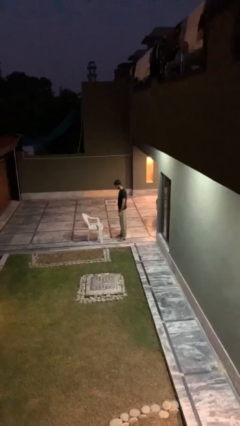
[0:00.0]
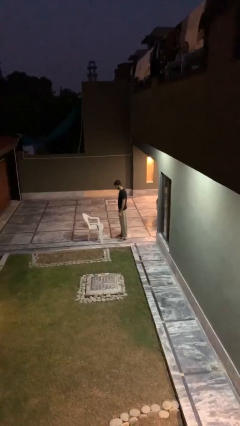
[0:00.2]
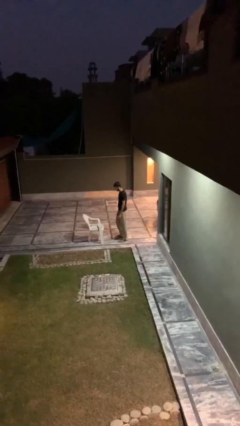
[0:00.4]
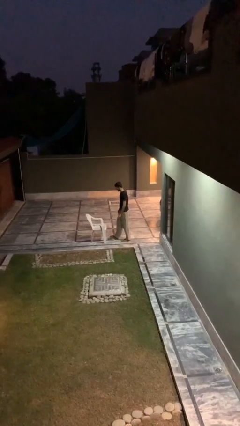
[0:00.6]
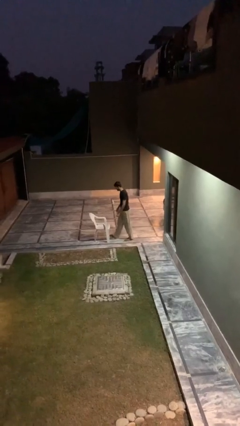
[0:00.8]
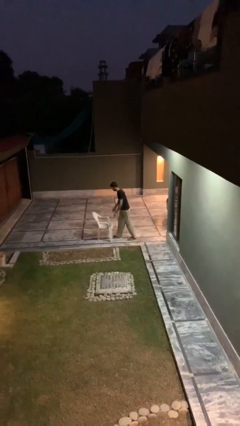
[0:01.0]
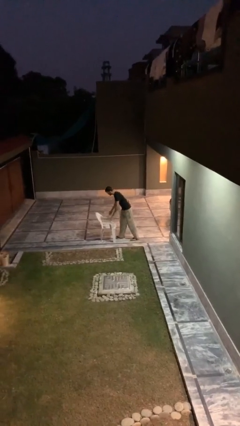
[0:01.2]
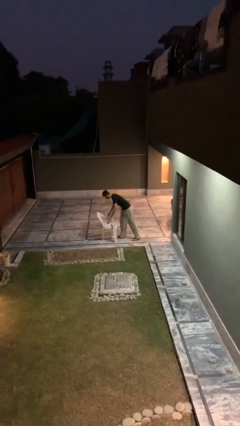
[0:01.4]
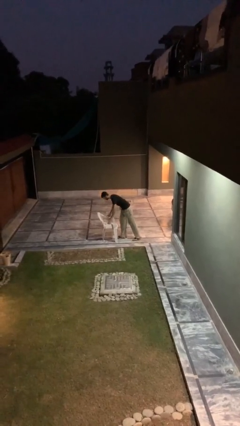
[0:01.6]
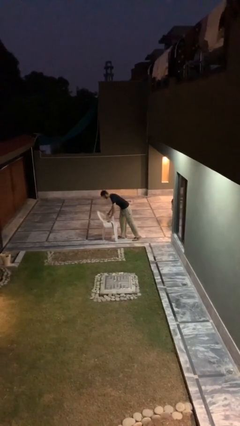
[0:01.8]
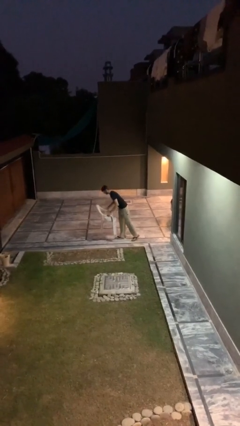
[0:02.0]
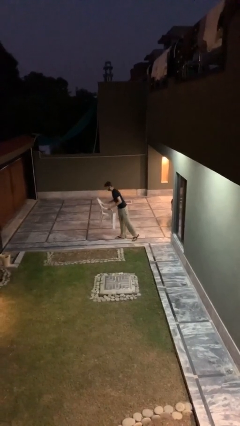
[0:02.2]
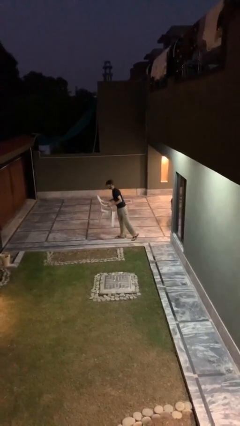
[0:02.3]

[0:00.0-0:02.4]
person picks up object from floor

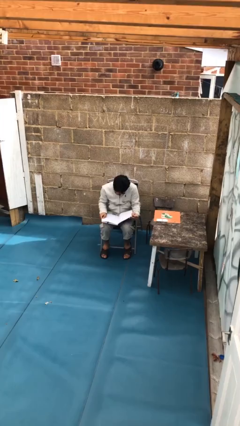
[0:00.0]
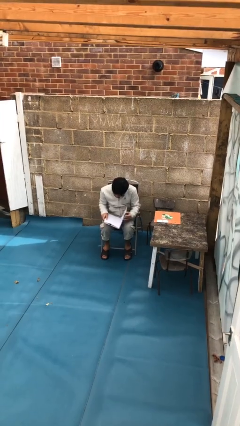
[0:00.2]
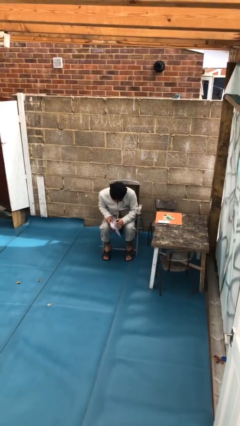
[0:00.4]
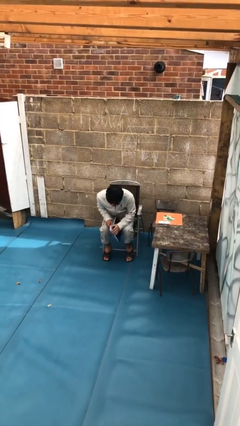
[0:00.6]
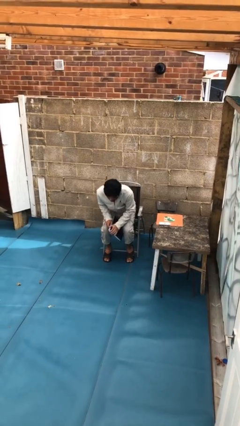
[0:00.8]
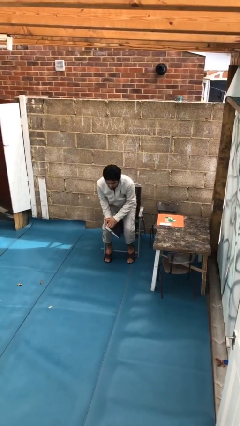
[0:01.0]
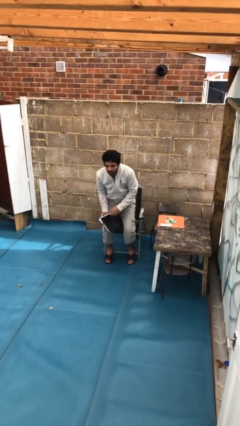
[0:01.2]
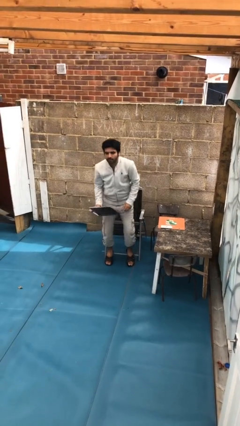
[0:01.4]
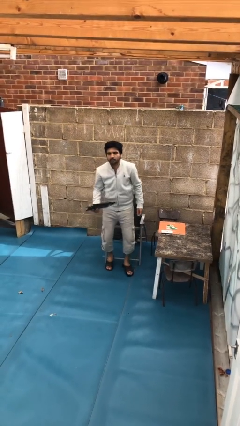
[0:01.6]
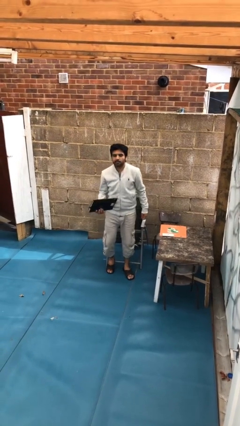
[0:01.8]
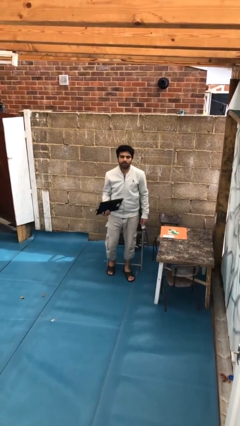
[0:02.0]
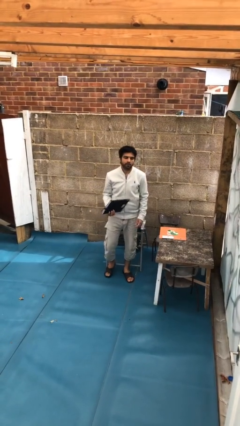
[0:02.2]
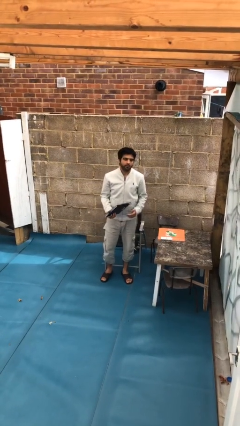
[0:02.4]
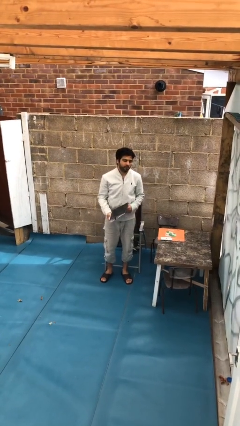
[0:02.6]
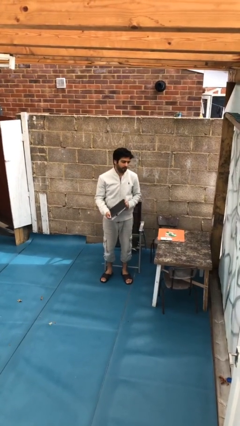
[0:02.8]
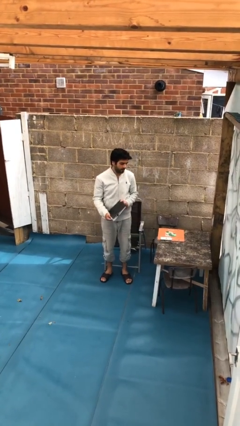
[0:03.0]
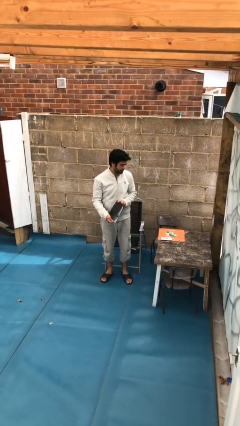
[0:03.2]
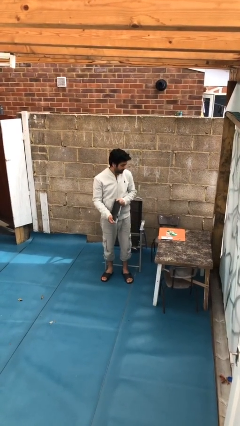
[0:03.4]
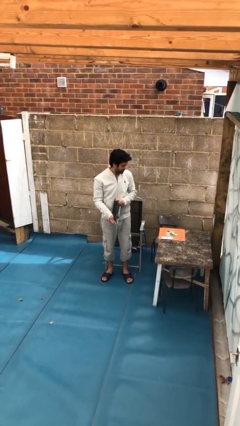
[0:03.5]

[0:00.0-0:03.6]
person stands up

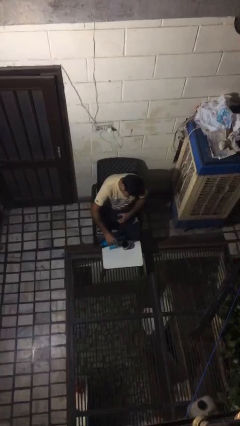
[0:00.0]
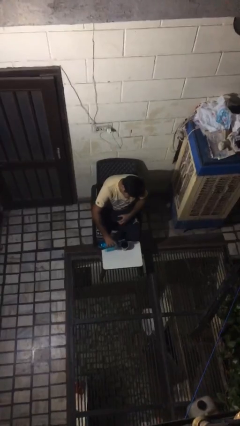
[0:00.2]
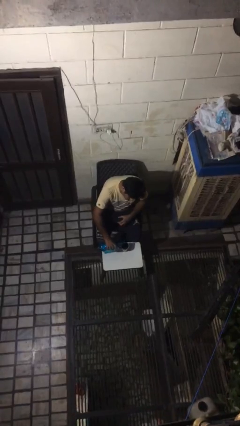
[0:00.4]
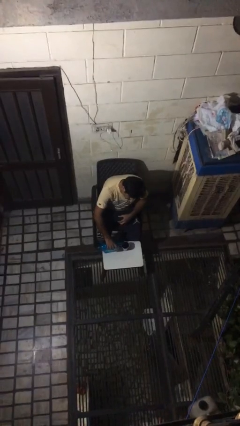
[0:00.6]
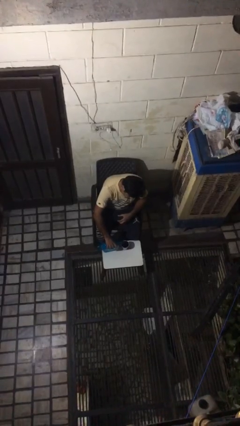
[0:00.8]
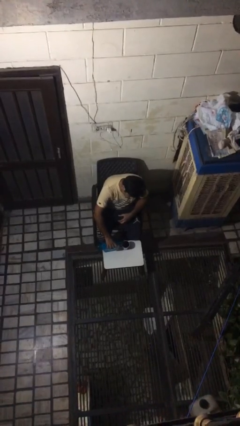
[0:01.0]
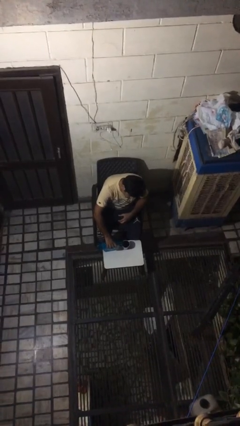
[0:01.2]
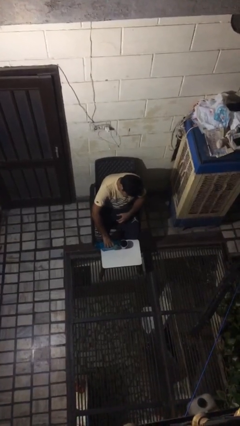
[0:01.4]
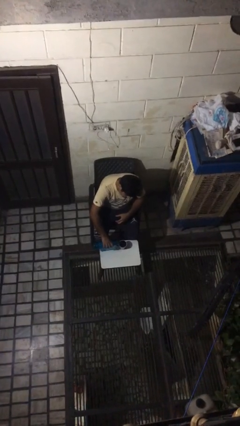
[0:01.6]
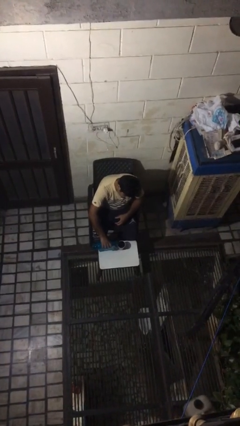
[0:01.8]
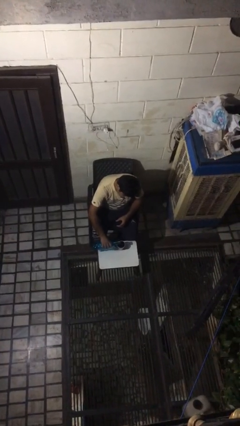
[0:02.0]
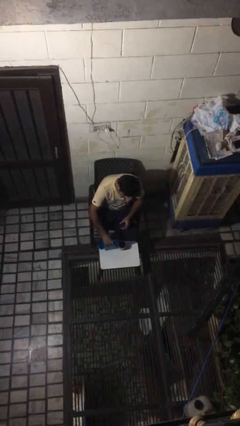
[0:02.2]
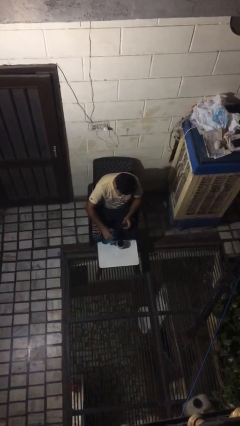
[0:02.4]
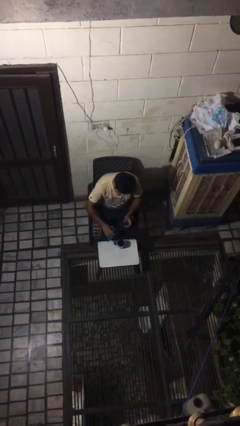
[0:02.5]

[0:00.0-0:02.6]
person pours liquid into cup

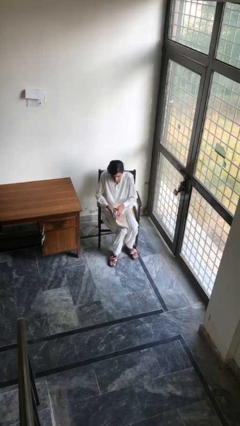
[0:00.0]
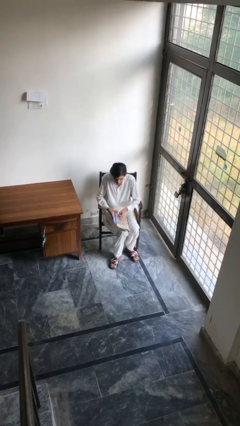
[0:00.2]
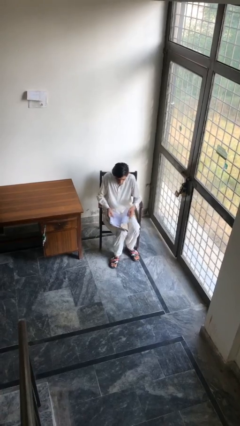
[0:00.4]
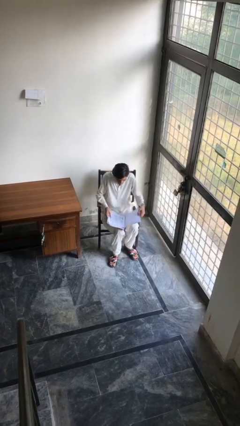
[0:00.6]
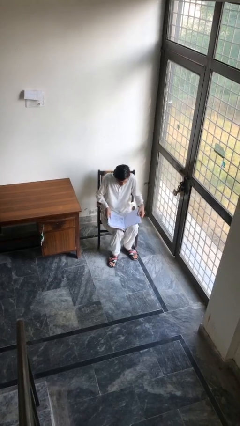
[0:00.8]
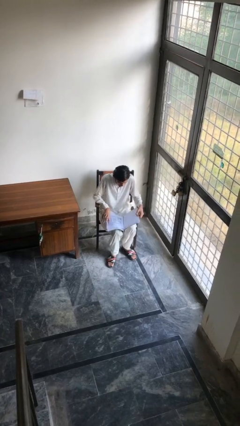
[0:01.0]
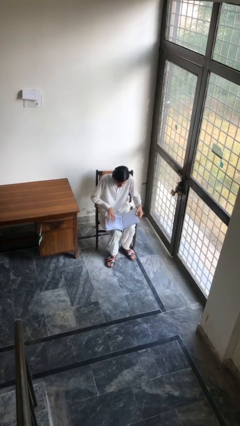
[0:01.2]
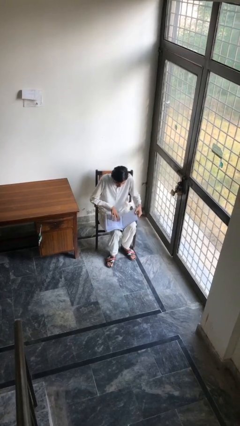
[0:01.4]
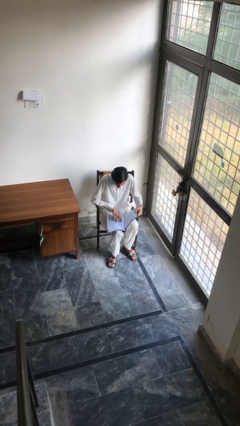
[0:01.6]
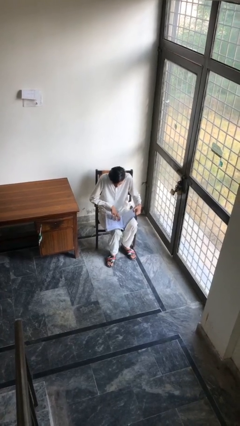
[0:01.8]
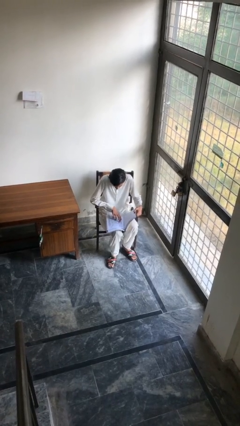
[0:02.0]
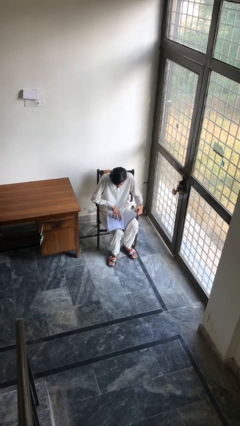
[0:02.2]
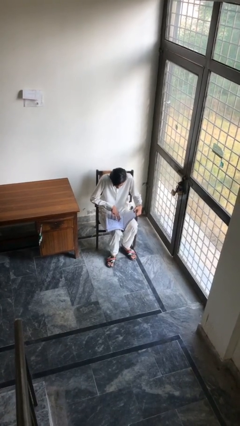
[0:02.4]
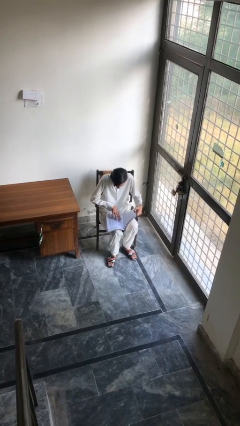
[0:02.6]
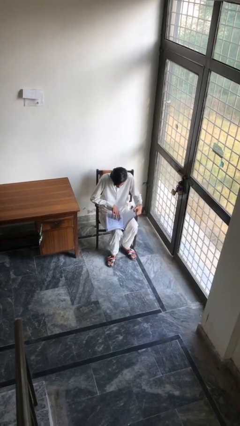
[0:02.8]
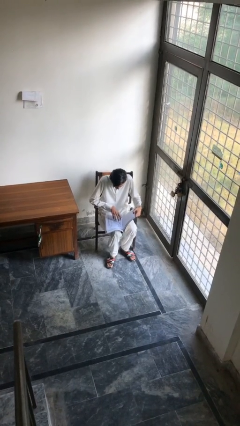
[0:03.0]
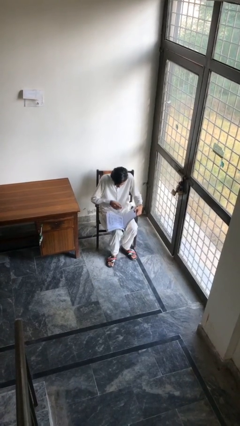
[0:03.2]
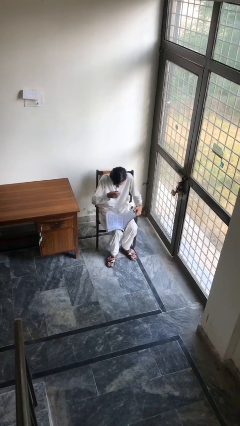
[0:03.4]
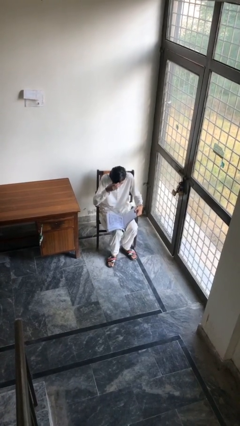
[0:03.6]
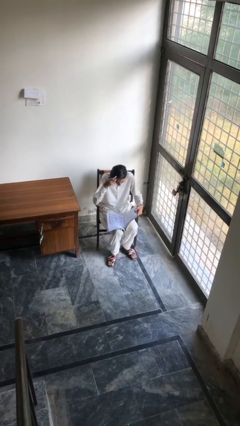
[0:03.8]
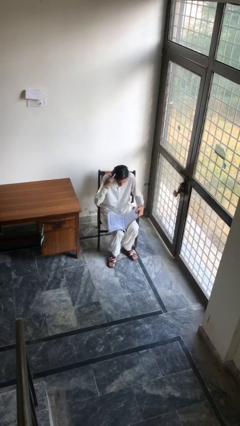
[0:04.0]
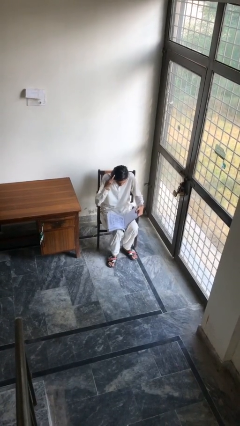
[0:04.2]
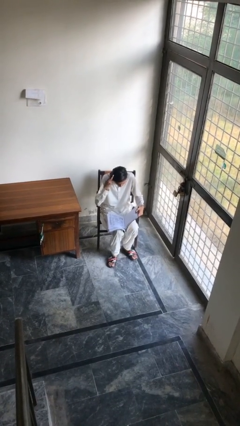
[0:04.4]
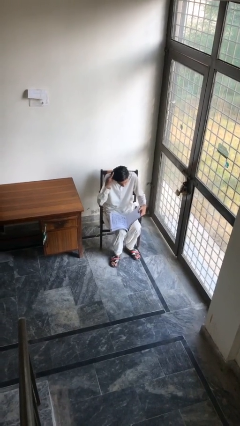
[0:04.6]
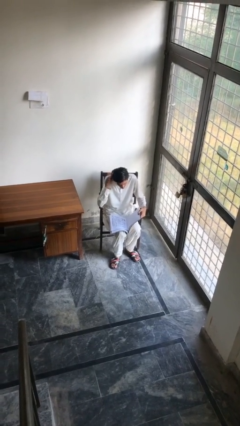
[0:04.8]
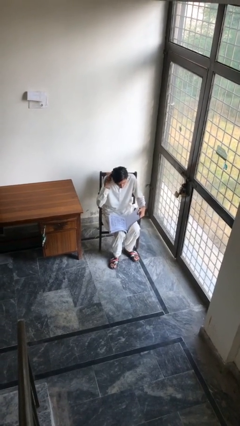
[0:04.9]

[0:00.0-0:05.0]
person reads document

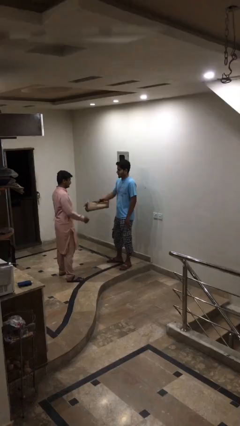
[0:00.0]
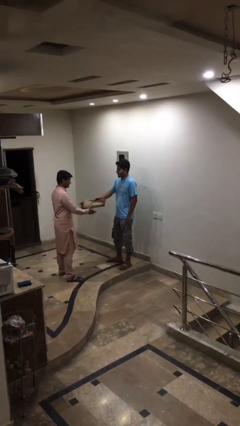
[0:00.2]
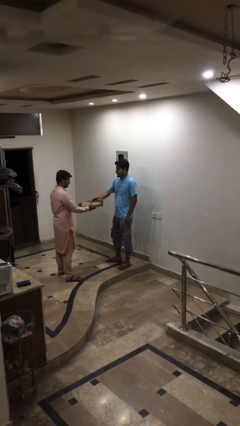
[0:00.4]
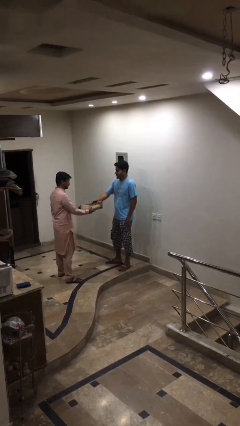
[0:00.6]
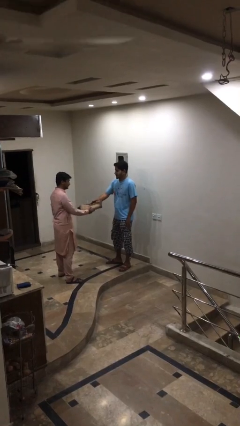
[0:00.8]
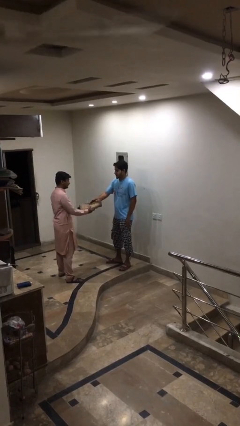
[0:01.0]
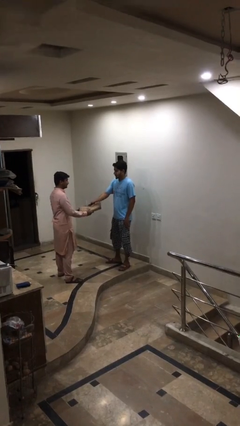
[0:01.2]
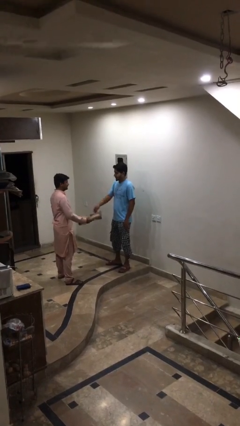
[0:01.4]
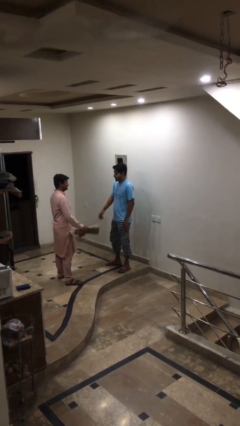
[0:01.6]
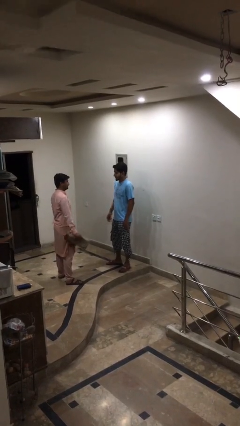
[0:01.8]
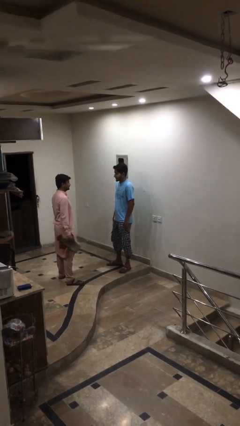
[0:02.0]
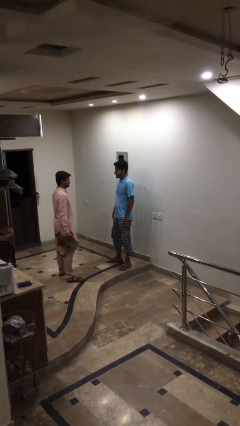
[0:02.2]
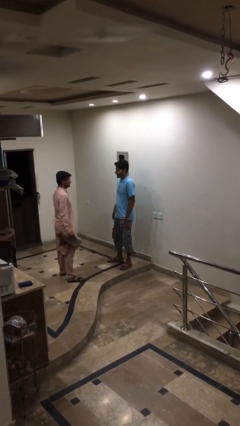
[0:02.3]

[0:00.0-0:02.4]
person transfers object to person

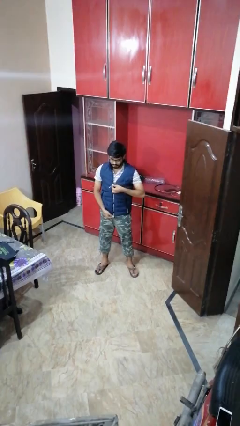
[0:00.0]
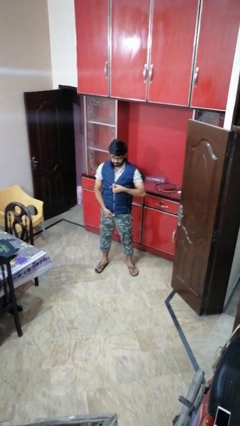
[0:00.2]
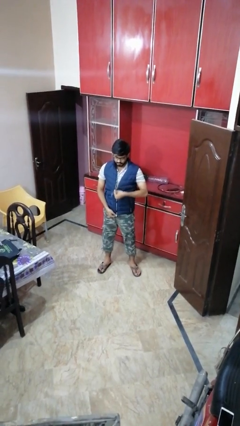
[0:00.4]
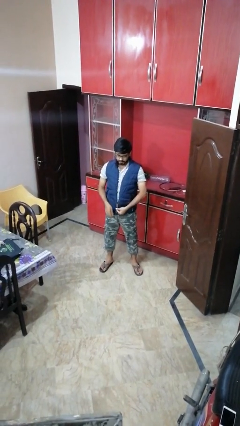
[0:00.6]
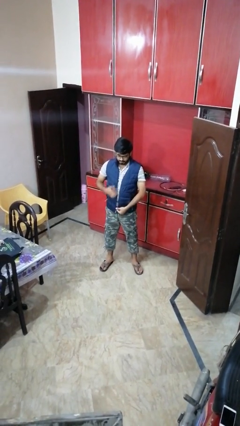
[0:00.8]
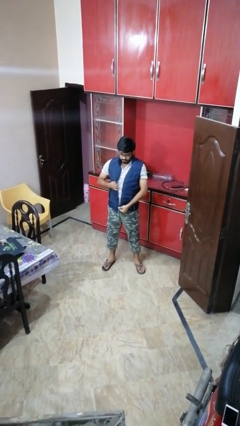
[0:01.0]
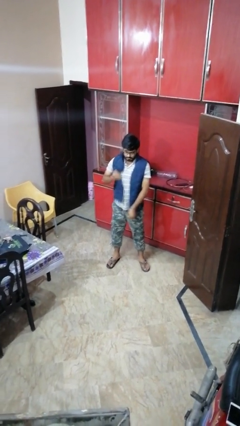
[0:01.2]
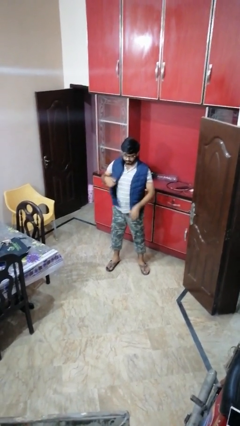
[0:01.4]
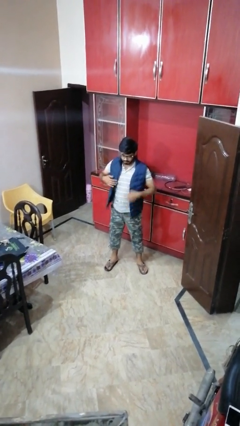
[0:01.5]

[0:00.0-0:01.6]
person unzips jacket
